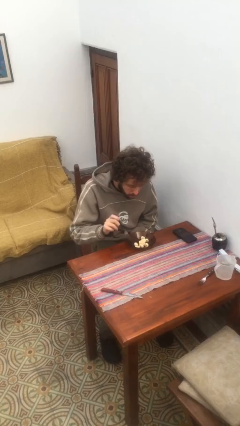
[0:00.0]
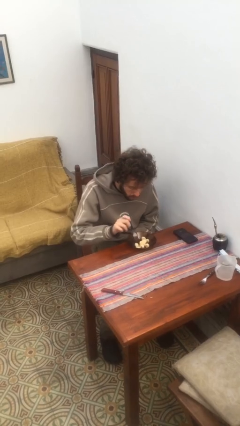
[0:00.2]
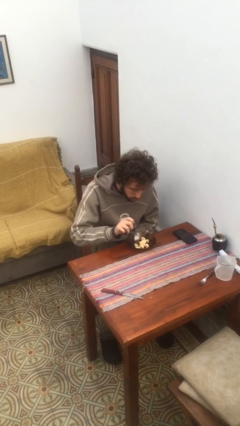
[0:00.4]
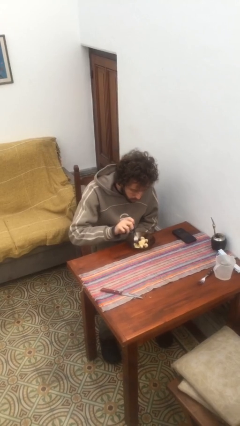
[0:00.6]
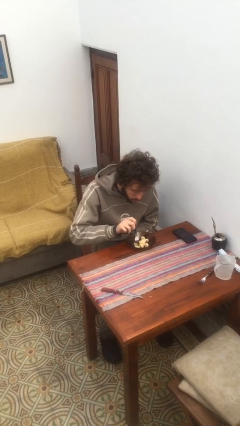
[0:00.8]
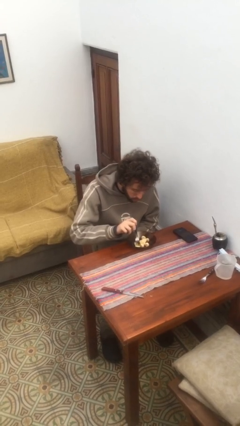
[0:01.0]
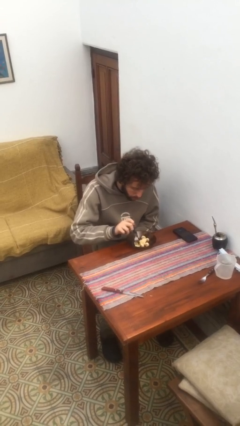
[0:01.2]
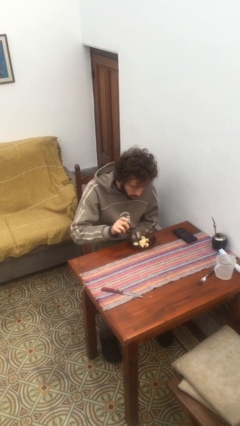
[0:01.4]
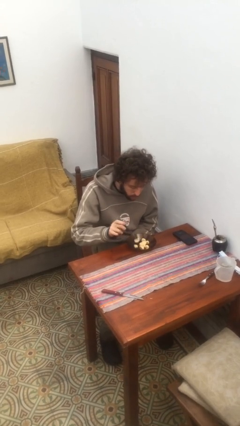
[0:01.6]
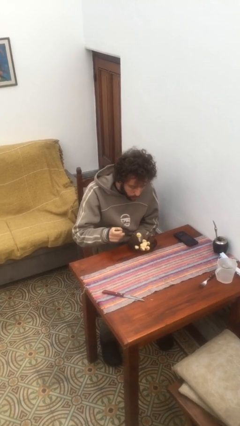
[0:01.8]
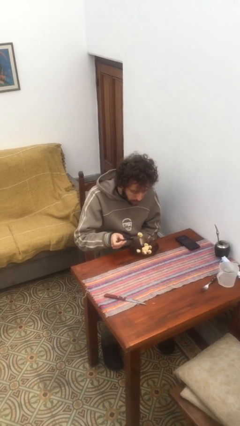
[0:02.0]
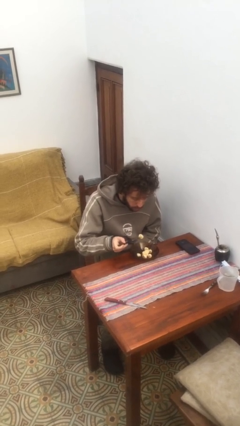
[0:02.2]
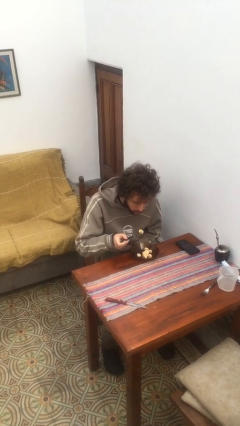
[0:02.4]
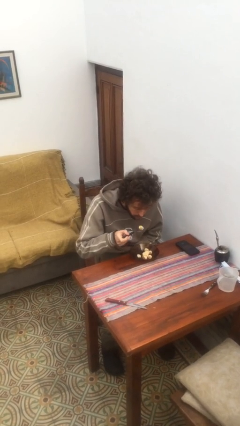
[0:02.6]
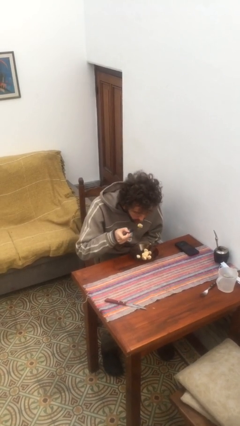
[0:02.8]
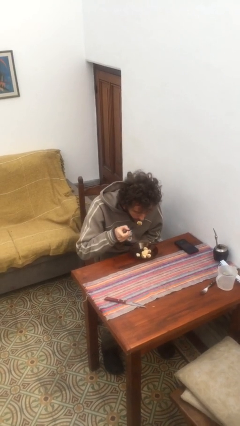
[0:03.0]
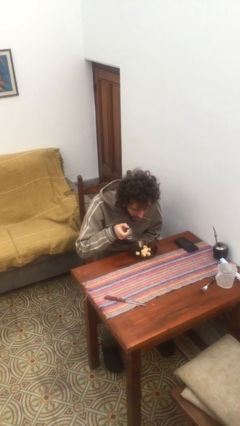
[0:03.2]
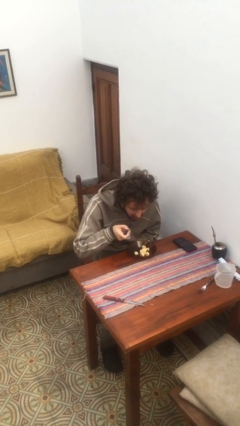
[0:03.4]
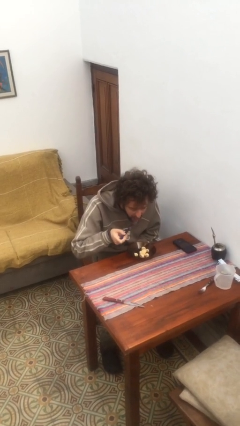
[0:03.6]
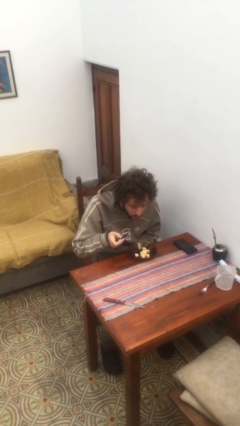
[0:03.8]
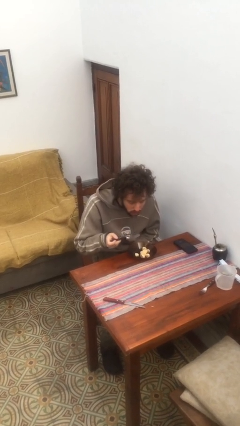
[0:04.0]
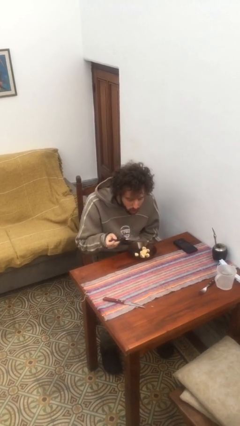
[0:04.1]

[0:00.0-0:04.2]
person eats with utensil

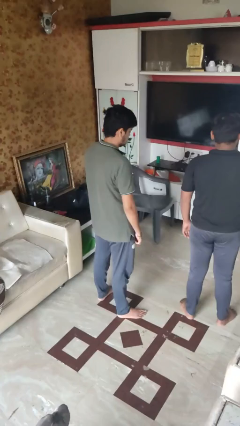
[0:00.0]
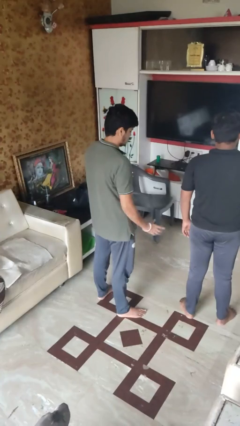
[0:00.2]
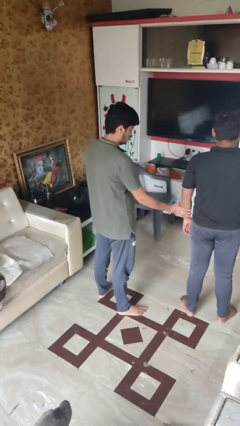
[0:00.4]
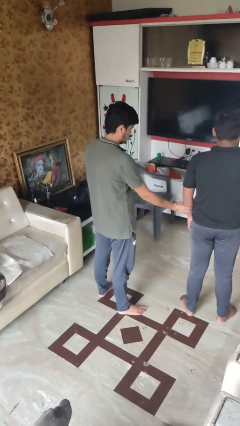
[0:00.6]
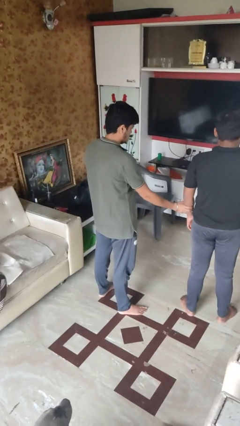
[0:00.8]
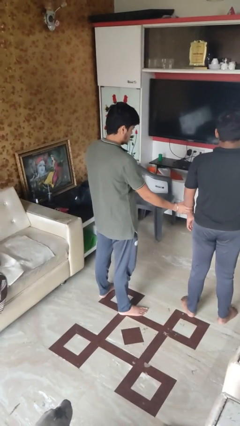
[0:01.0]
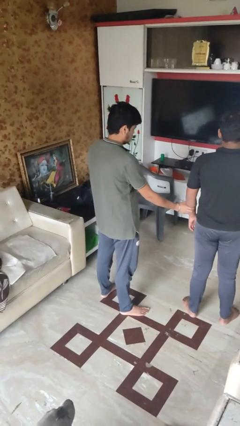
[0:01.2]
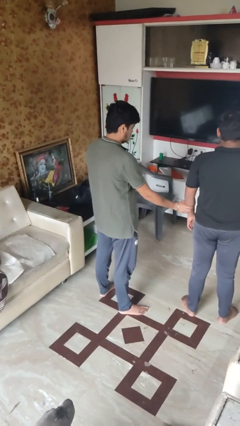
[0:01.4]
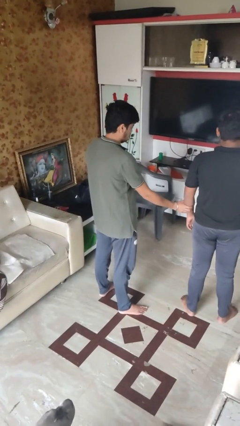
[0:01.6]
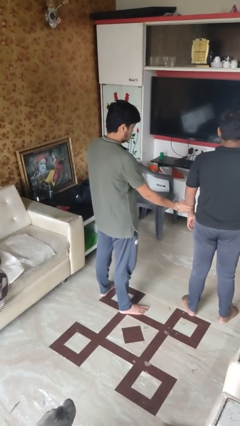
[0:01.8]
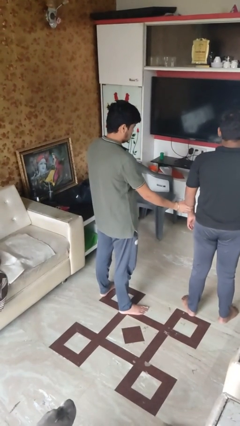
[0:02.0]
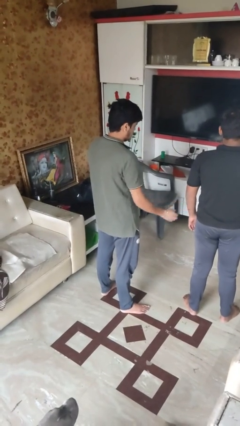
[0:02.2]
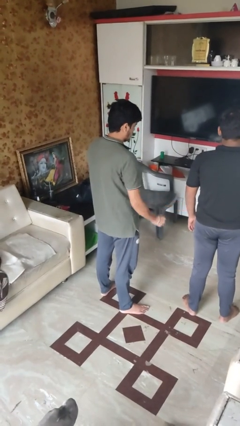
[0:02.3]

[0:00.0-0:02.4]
person grabs person by forearm

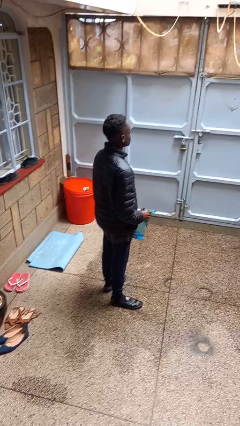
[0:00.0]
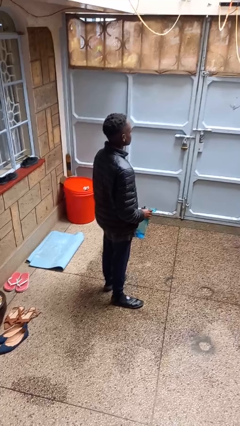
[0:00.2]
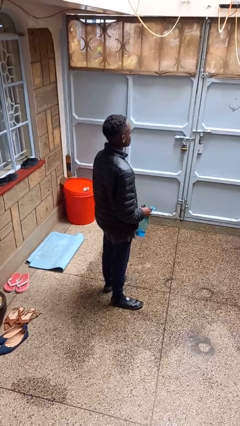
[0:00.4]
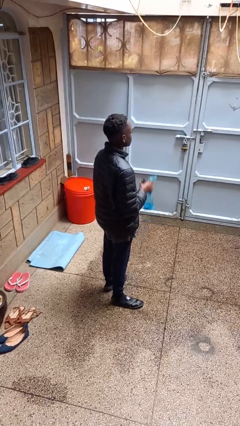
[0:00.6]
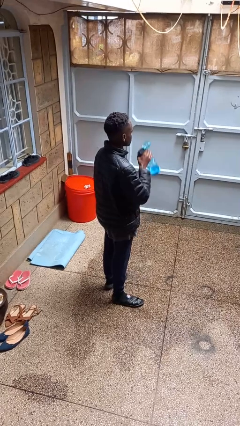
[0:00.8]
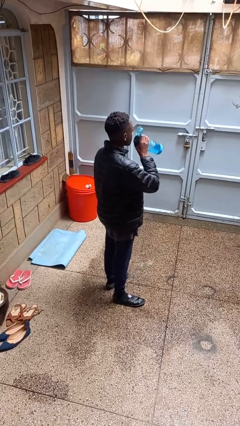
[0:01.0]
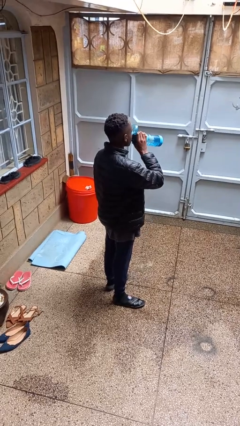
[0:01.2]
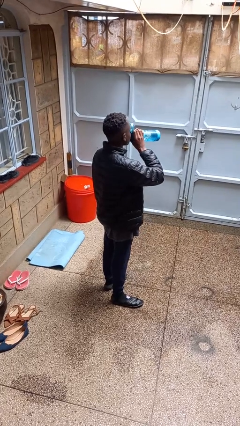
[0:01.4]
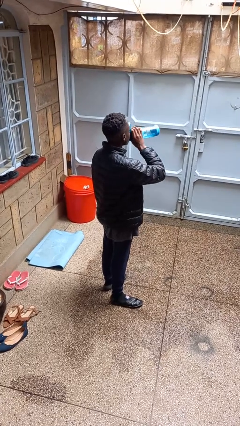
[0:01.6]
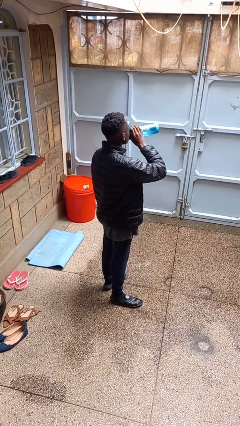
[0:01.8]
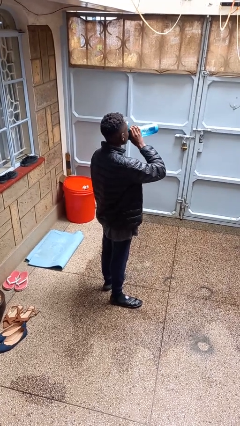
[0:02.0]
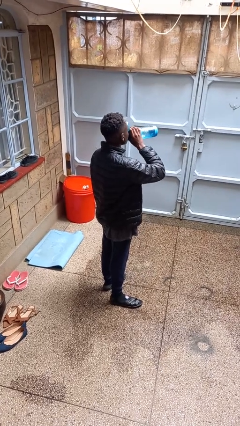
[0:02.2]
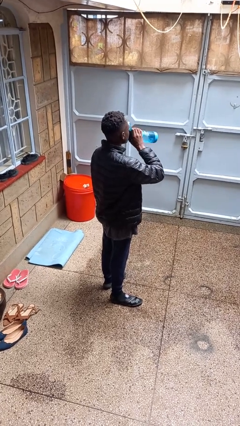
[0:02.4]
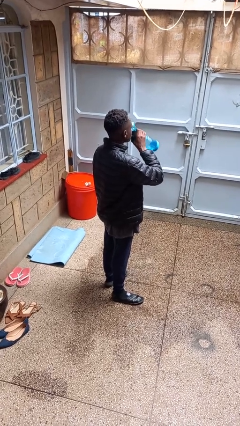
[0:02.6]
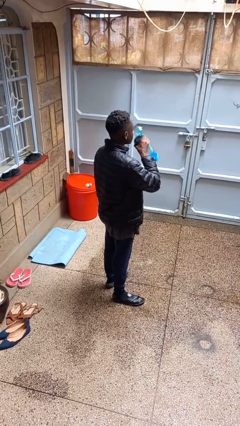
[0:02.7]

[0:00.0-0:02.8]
person drinks from bottle

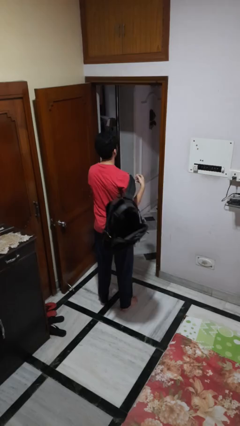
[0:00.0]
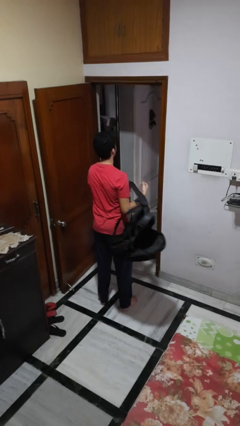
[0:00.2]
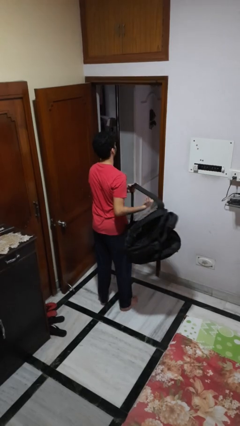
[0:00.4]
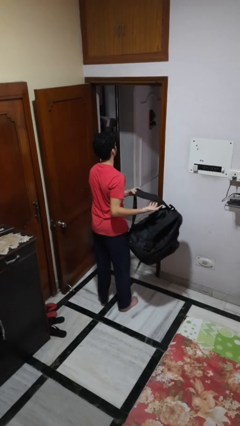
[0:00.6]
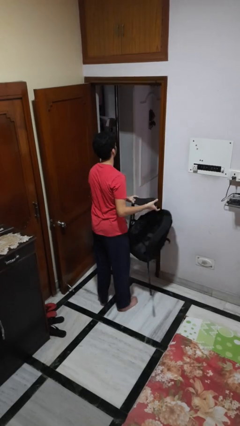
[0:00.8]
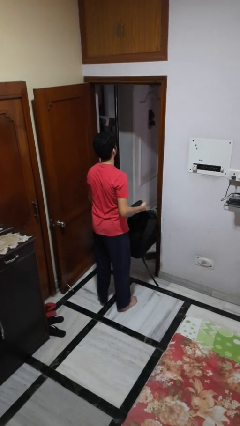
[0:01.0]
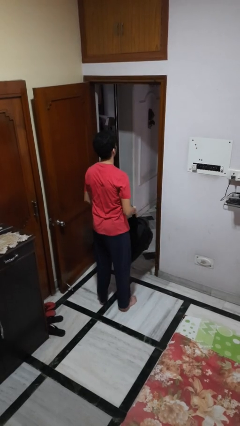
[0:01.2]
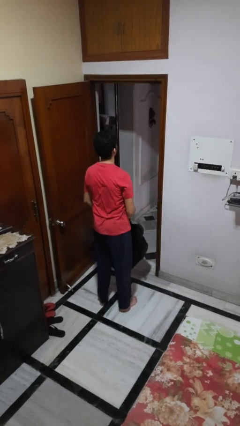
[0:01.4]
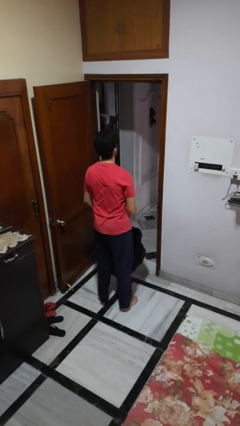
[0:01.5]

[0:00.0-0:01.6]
person takes off backpack

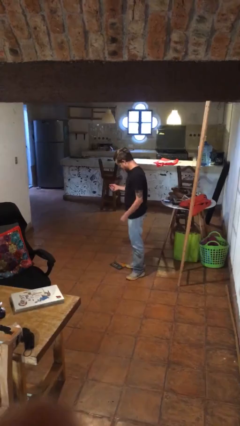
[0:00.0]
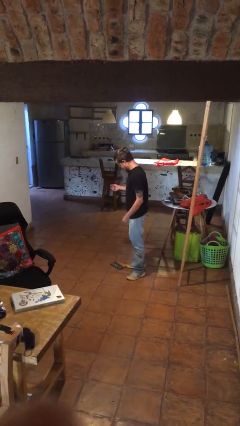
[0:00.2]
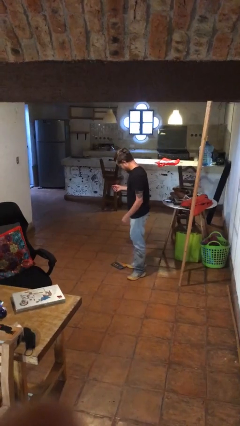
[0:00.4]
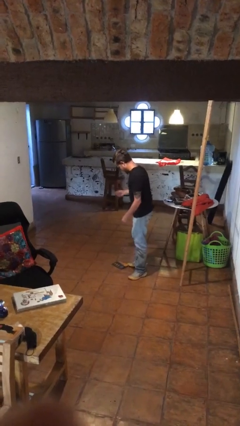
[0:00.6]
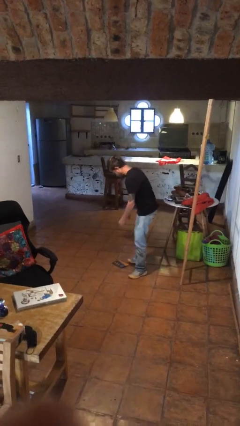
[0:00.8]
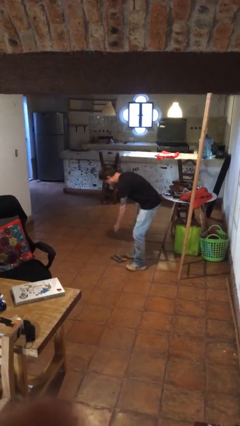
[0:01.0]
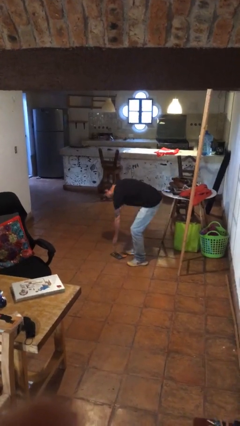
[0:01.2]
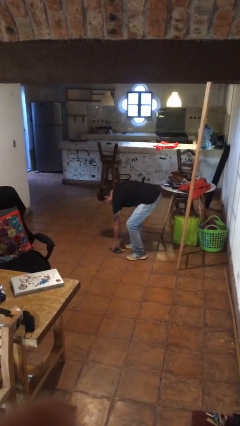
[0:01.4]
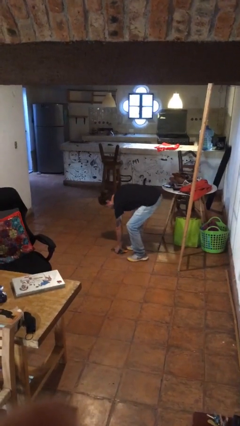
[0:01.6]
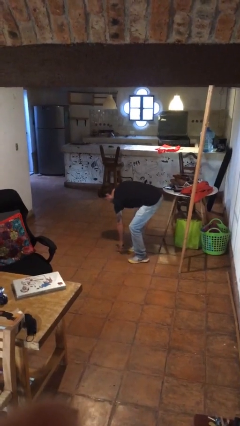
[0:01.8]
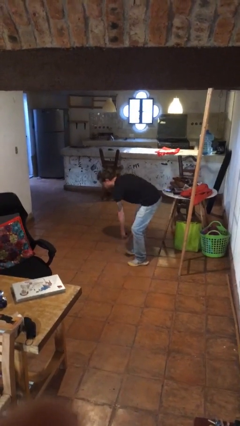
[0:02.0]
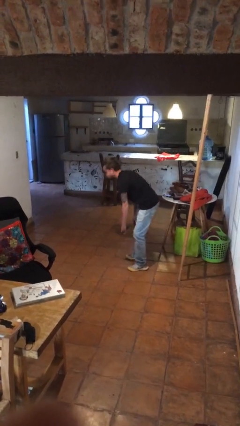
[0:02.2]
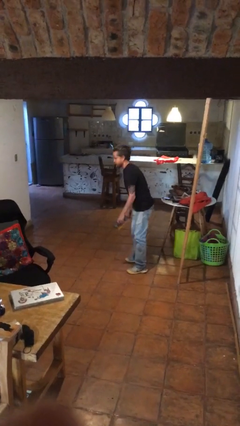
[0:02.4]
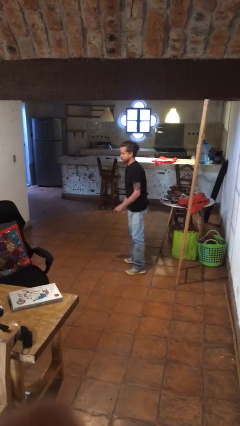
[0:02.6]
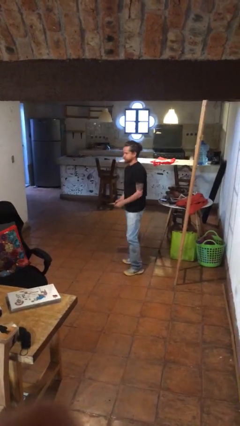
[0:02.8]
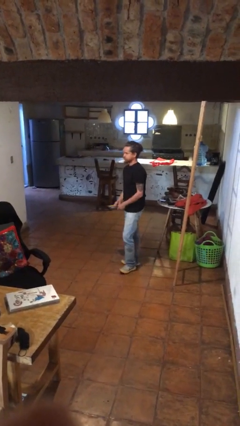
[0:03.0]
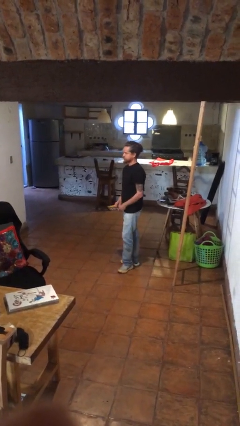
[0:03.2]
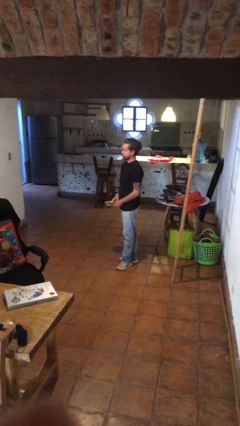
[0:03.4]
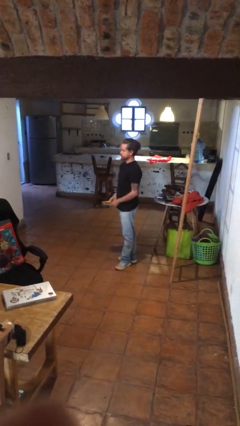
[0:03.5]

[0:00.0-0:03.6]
person picks up object from floor

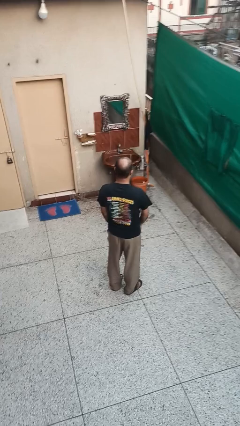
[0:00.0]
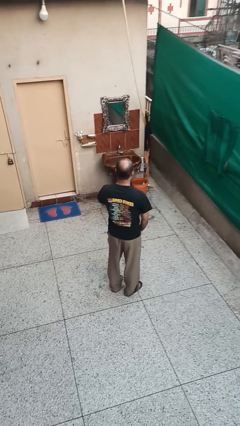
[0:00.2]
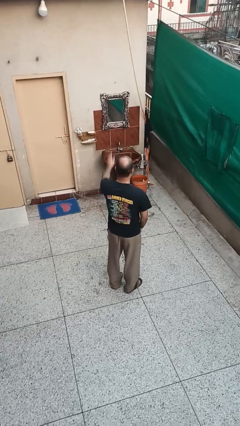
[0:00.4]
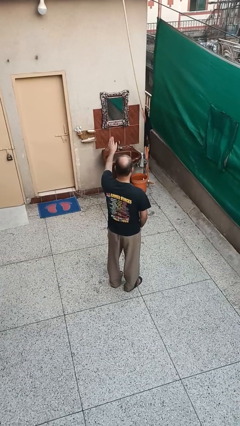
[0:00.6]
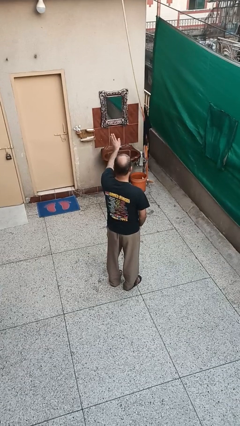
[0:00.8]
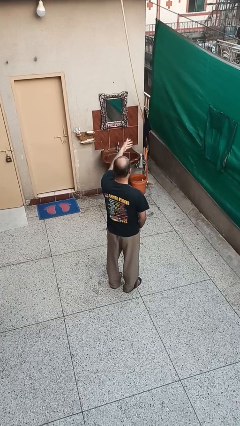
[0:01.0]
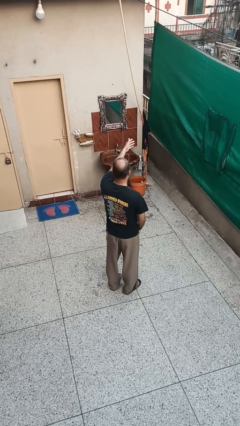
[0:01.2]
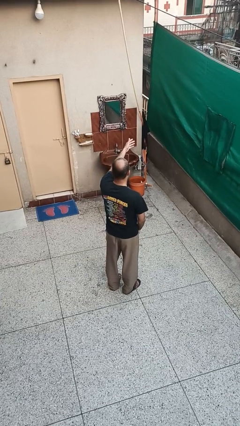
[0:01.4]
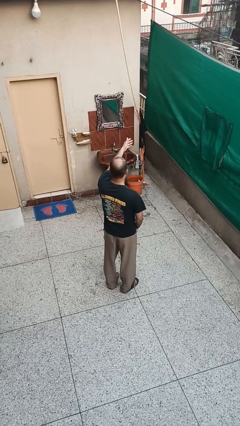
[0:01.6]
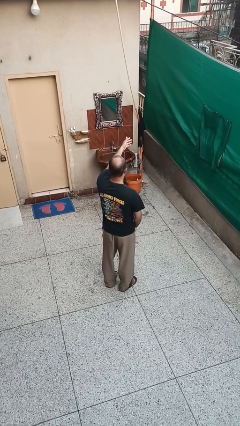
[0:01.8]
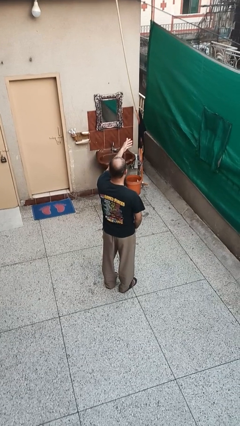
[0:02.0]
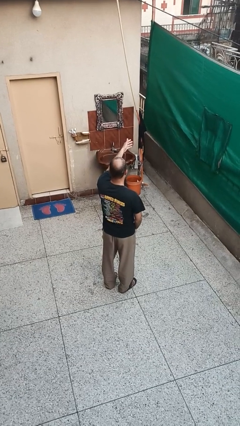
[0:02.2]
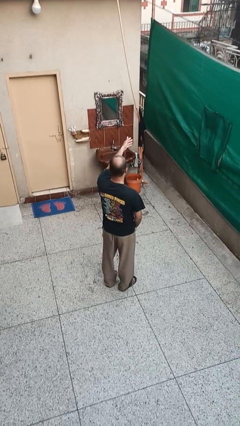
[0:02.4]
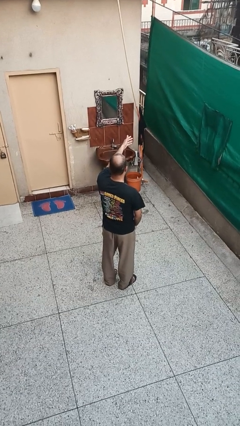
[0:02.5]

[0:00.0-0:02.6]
person gestures swipe right
